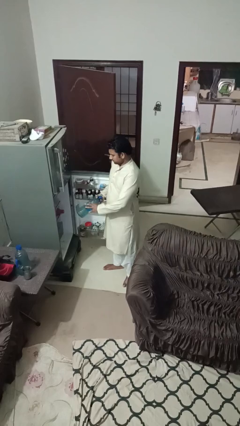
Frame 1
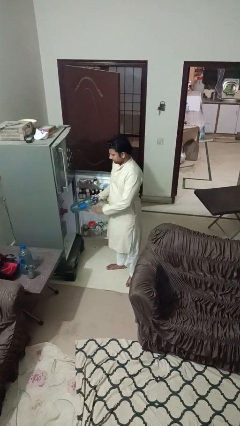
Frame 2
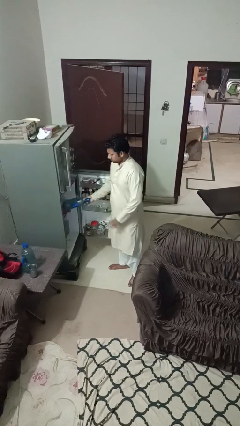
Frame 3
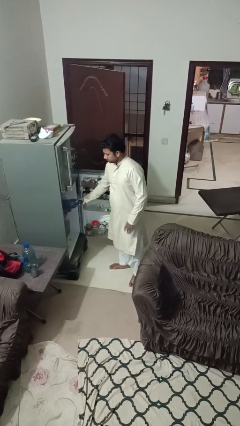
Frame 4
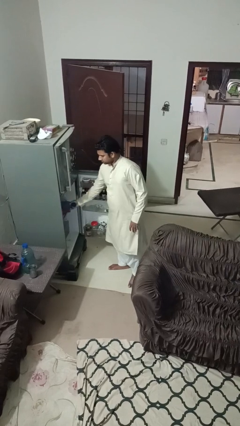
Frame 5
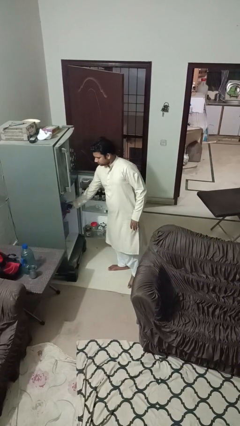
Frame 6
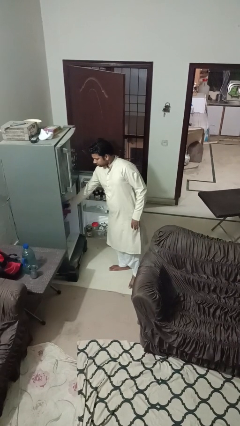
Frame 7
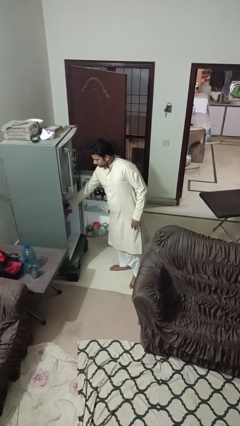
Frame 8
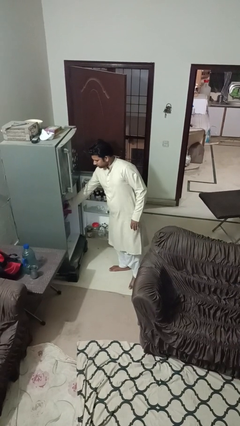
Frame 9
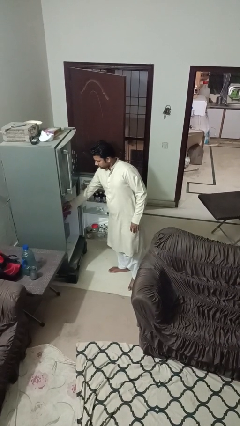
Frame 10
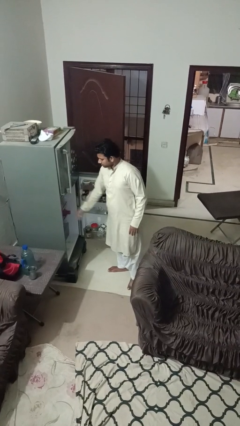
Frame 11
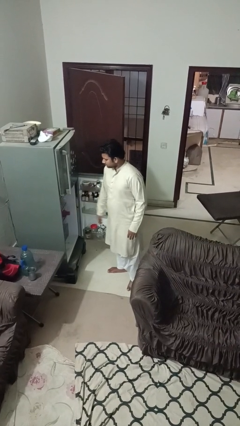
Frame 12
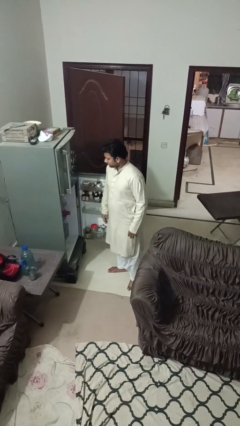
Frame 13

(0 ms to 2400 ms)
person puts object into refrigerator

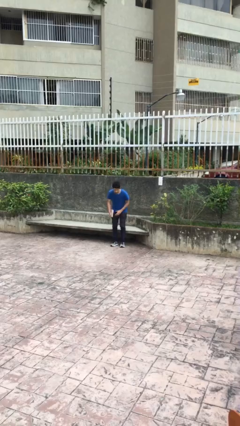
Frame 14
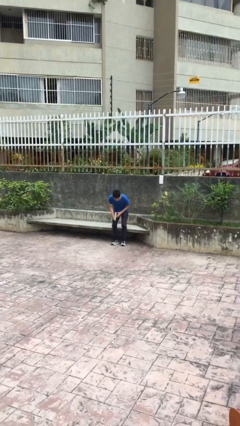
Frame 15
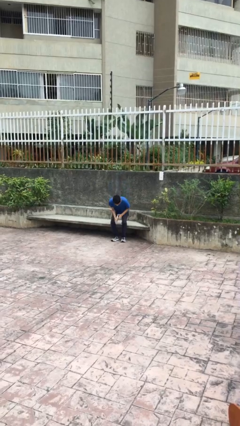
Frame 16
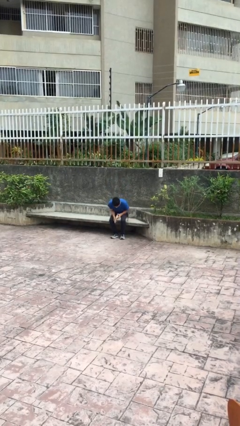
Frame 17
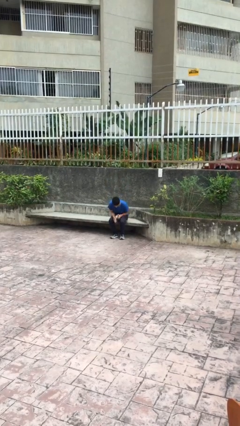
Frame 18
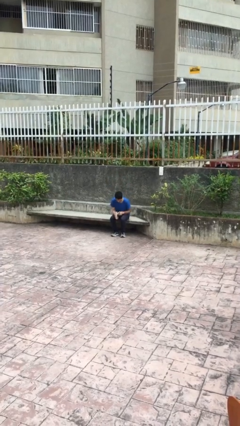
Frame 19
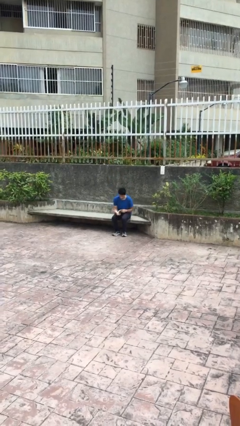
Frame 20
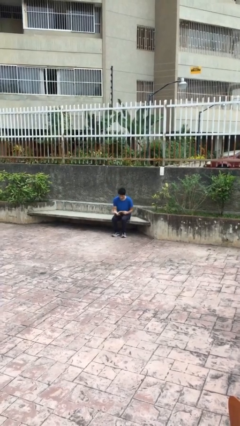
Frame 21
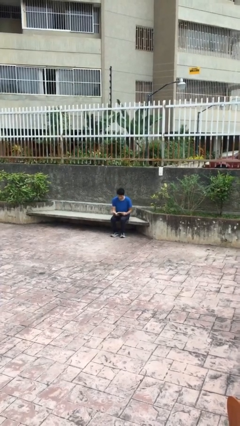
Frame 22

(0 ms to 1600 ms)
person sits down

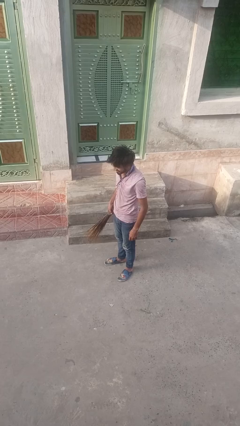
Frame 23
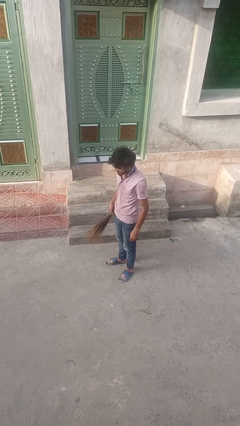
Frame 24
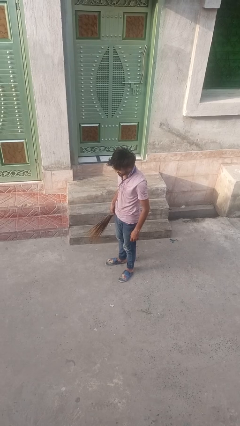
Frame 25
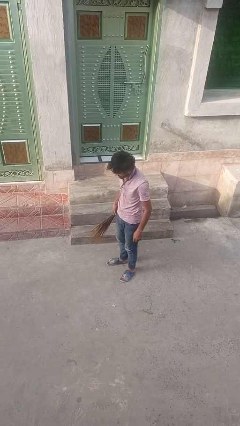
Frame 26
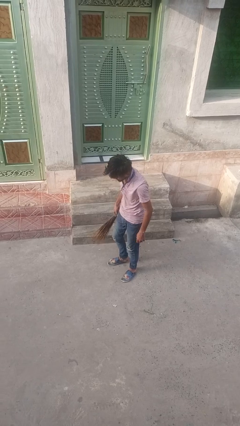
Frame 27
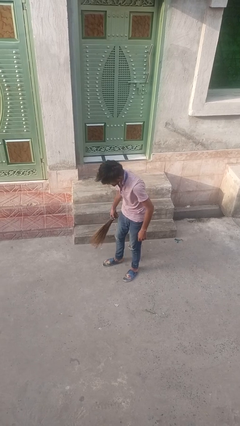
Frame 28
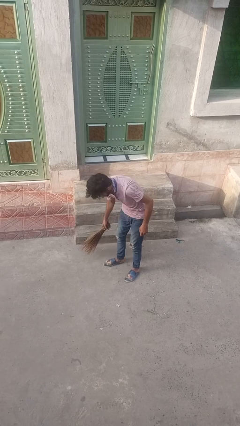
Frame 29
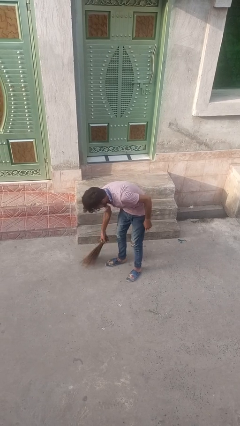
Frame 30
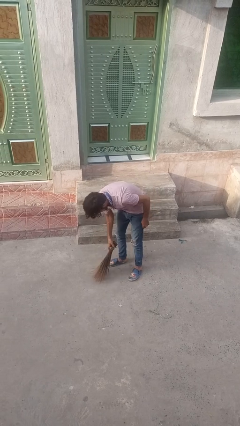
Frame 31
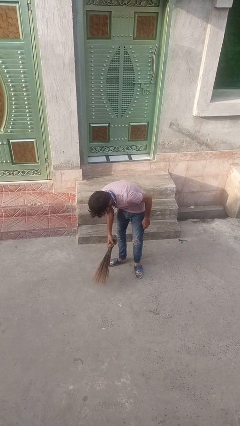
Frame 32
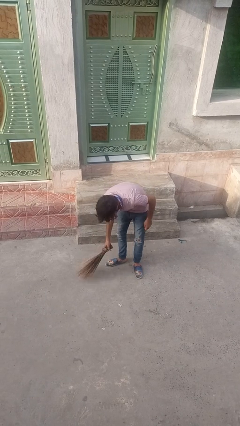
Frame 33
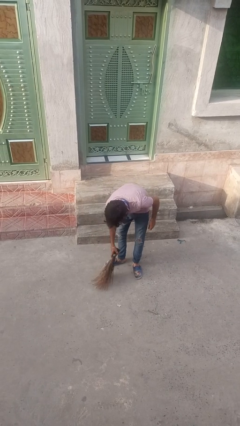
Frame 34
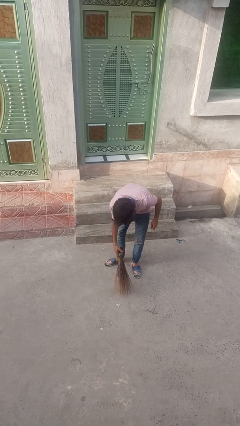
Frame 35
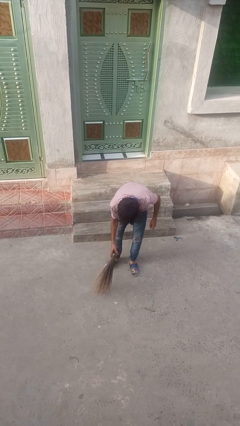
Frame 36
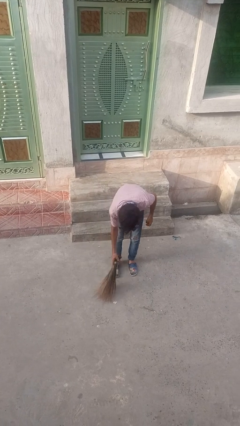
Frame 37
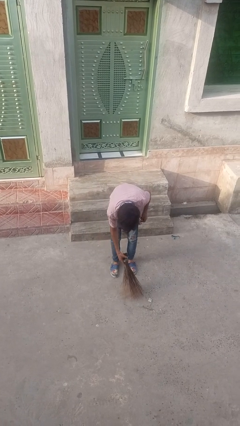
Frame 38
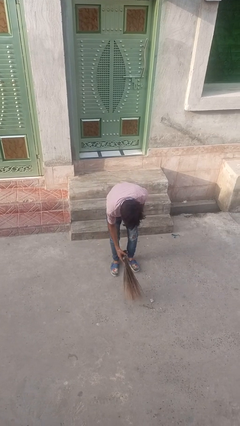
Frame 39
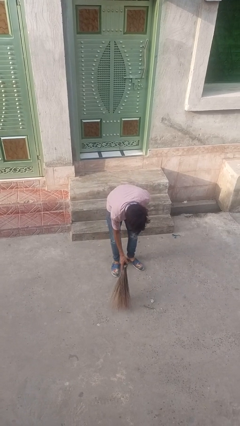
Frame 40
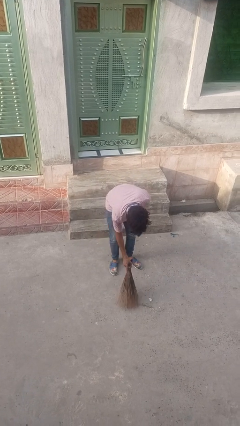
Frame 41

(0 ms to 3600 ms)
person sweeps floor

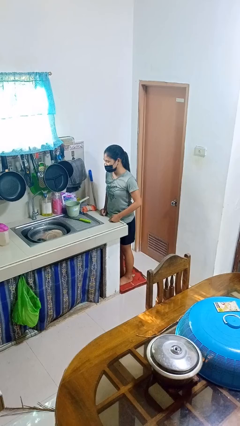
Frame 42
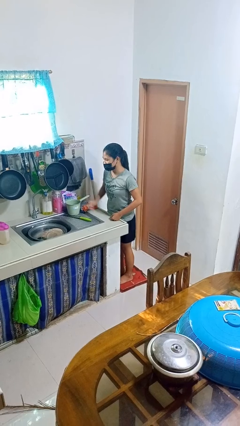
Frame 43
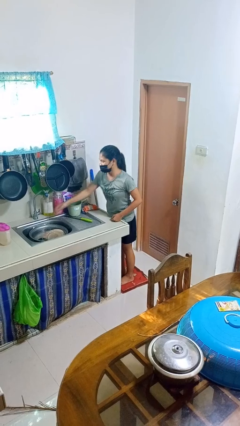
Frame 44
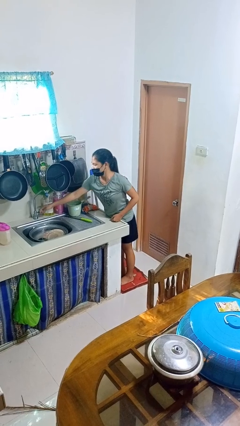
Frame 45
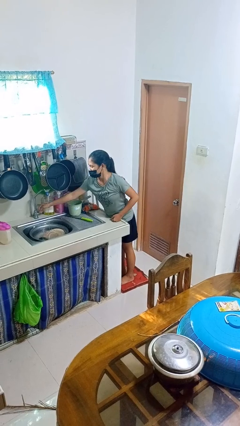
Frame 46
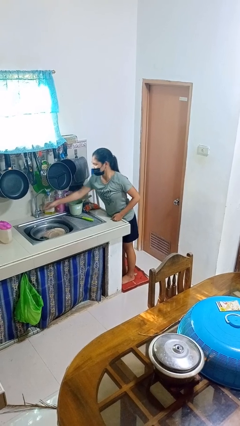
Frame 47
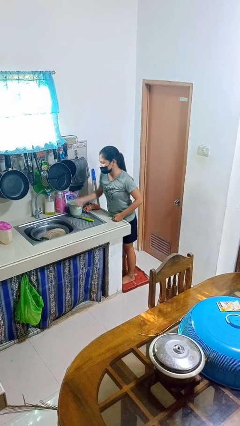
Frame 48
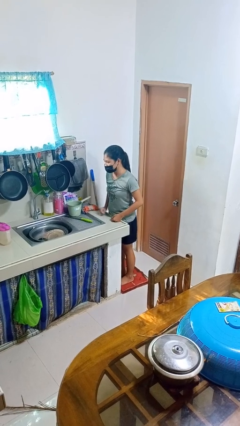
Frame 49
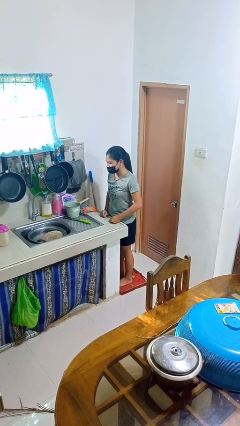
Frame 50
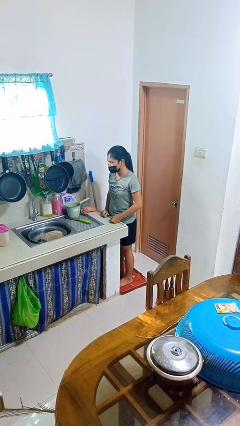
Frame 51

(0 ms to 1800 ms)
person turns off faucet

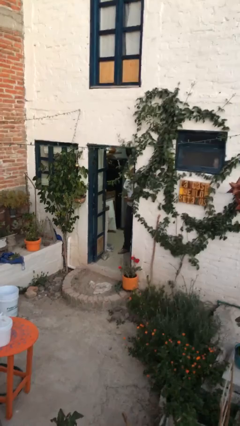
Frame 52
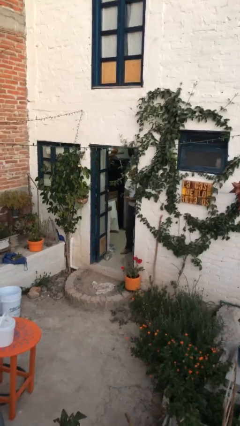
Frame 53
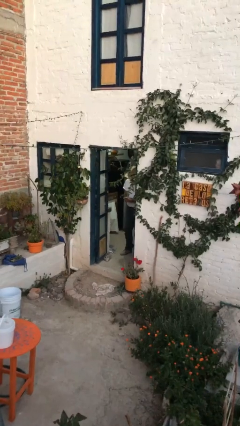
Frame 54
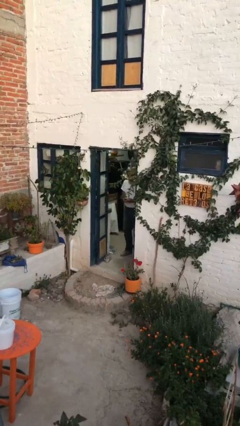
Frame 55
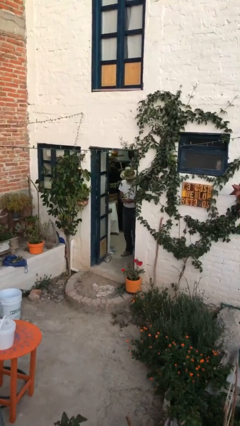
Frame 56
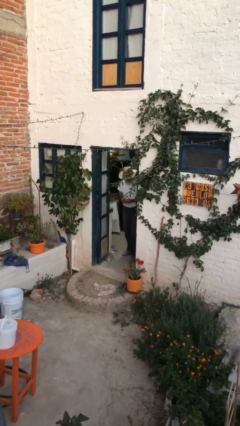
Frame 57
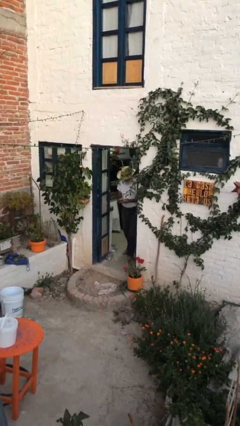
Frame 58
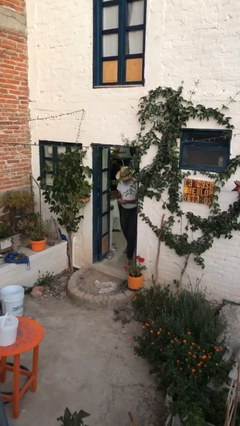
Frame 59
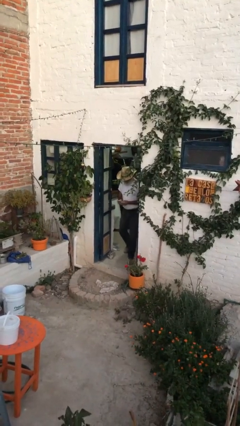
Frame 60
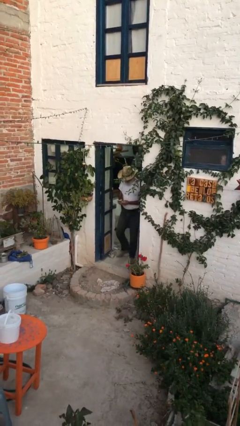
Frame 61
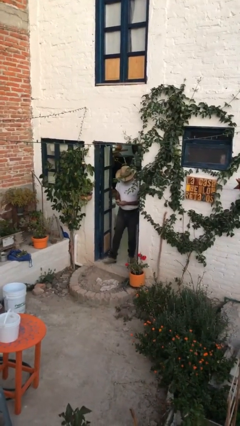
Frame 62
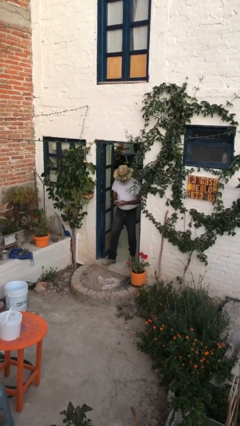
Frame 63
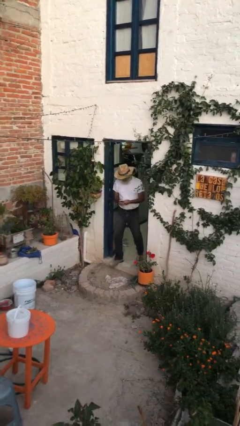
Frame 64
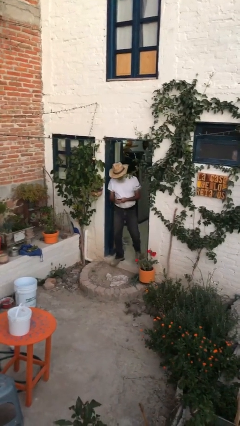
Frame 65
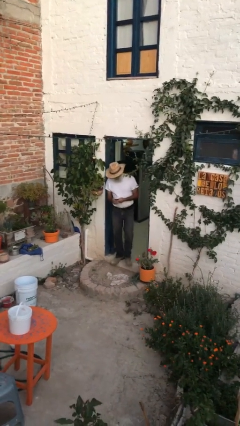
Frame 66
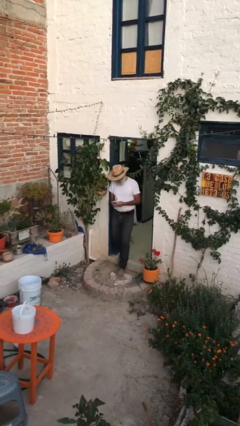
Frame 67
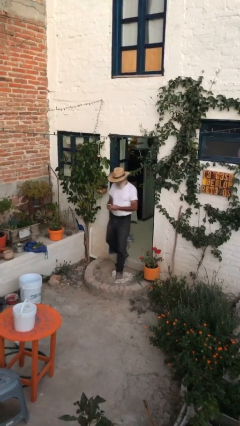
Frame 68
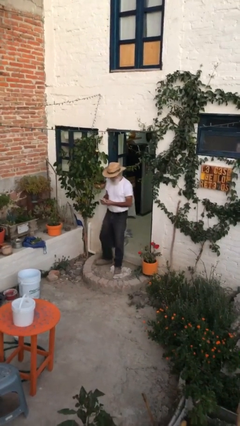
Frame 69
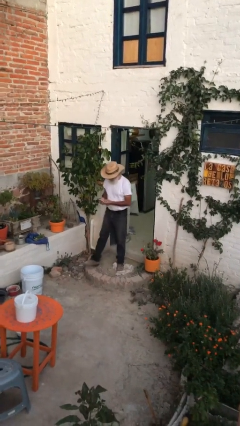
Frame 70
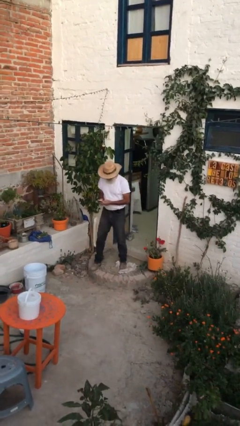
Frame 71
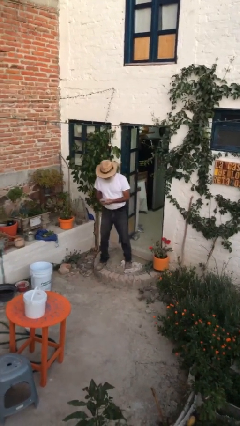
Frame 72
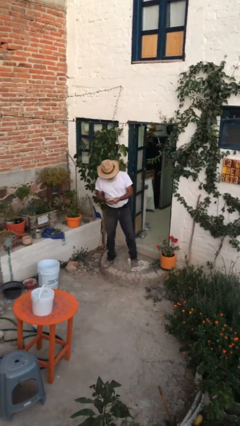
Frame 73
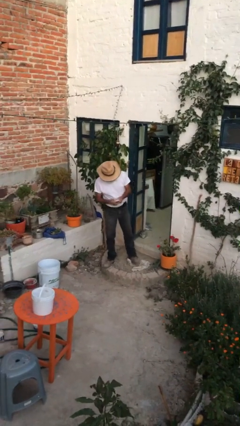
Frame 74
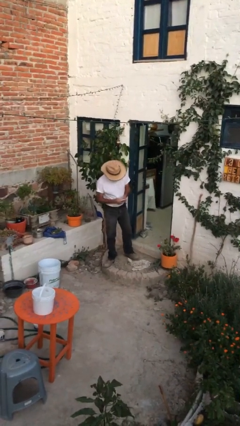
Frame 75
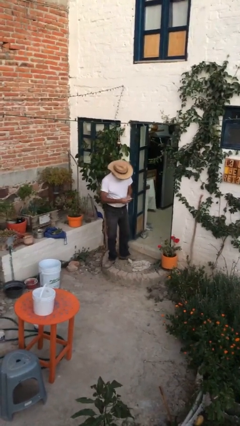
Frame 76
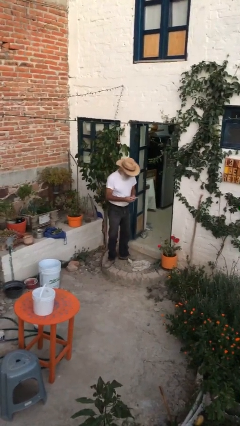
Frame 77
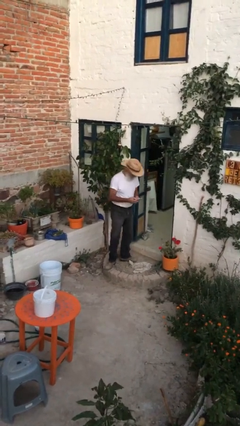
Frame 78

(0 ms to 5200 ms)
person enters scene through structure

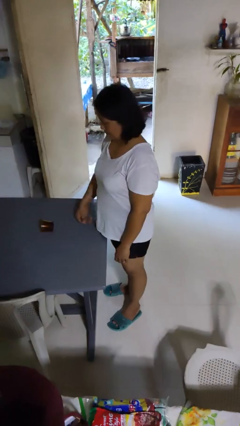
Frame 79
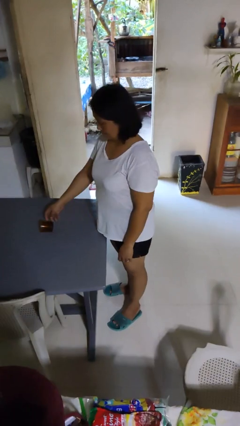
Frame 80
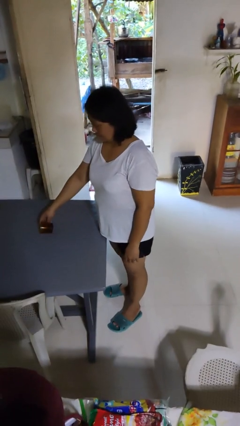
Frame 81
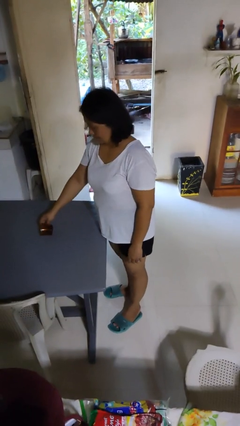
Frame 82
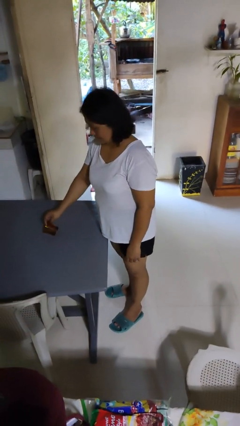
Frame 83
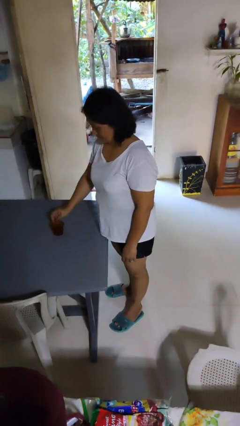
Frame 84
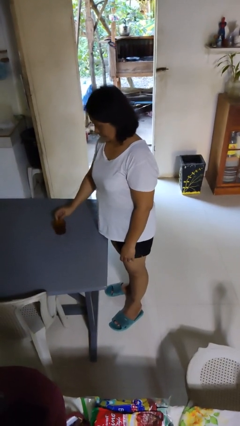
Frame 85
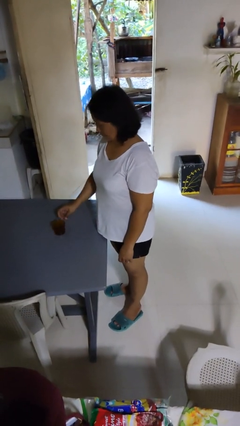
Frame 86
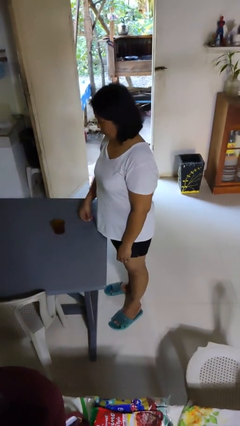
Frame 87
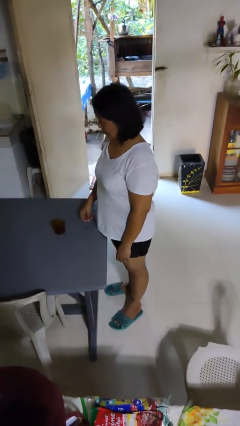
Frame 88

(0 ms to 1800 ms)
person sets upright glass

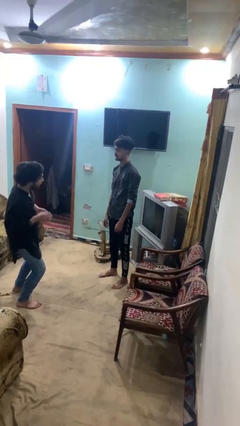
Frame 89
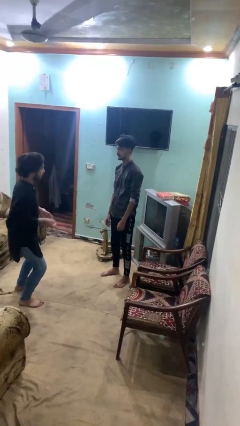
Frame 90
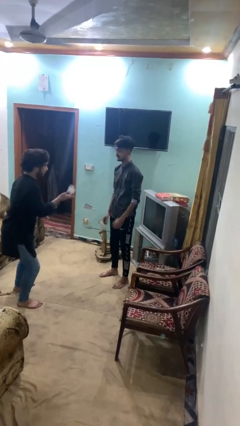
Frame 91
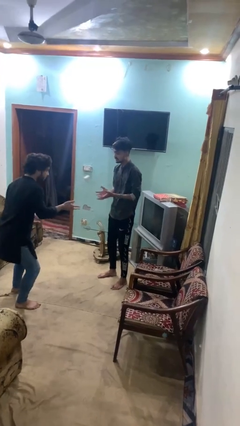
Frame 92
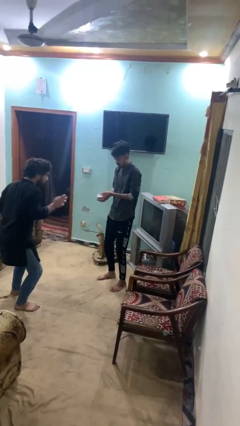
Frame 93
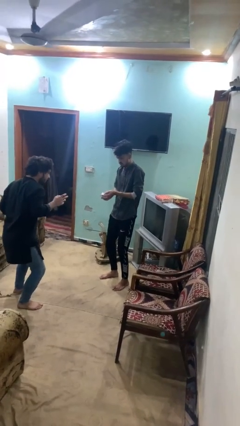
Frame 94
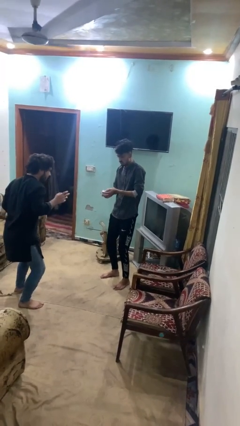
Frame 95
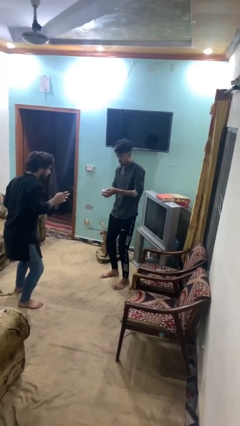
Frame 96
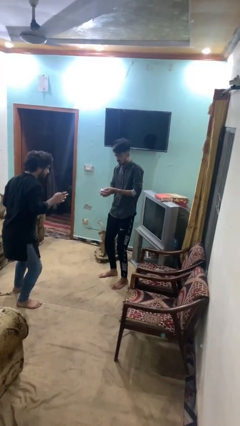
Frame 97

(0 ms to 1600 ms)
person catches object from person
